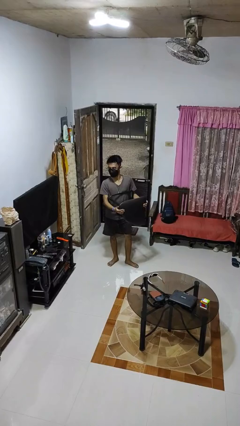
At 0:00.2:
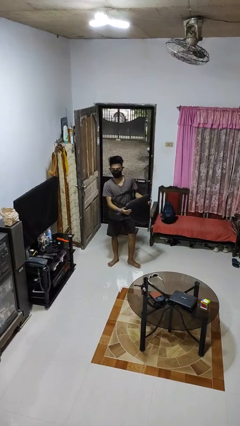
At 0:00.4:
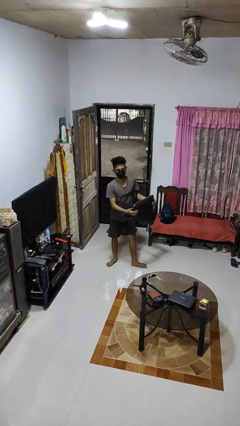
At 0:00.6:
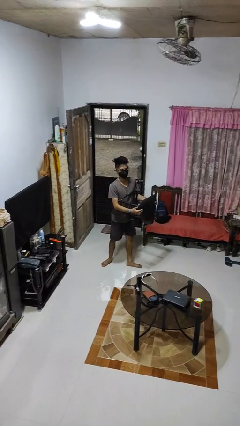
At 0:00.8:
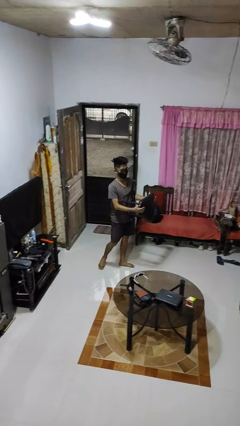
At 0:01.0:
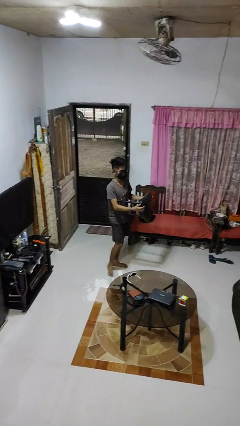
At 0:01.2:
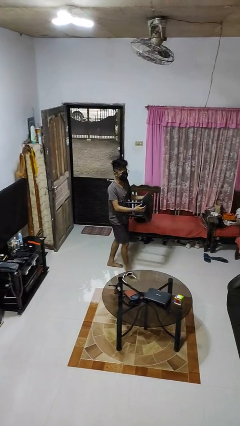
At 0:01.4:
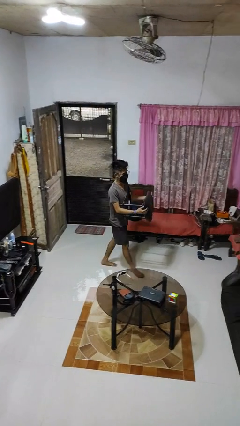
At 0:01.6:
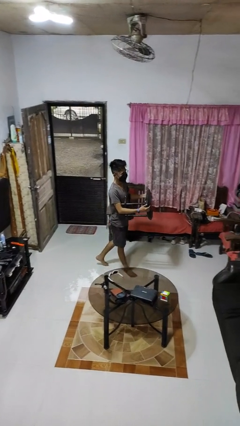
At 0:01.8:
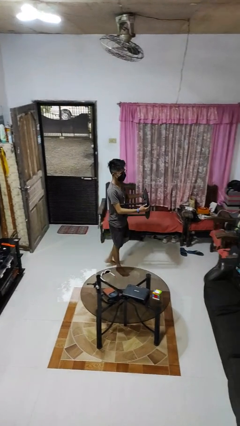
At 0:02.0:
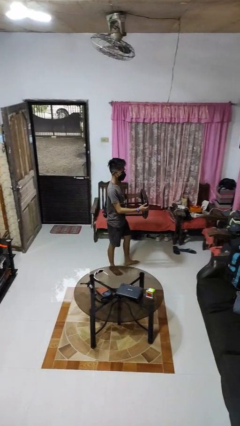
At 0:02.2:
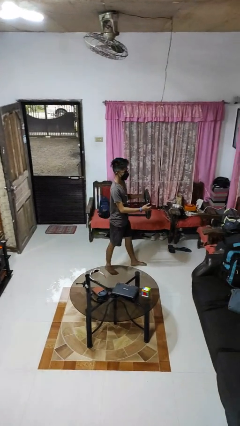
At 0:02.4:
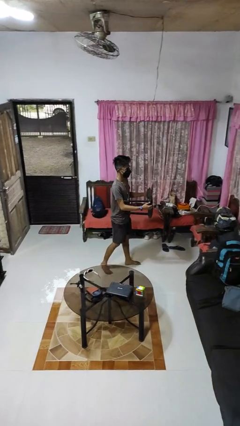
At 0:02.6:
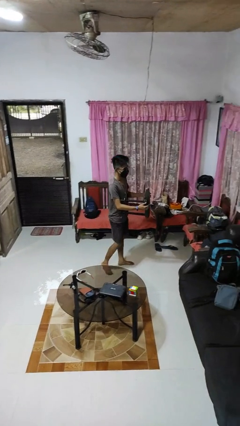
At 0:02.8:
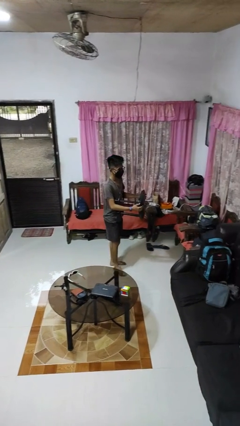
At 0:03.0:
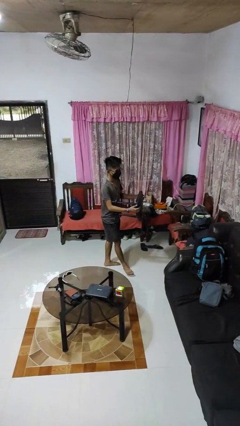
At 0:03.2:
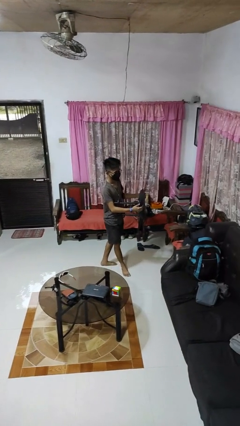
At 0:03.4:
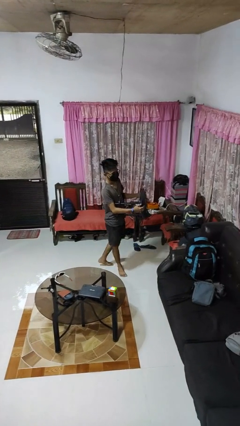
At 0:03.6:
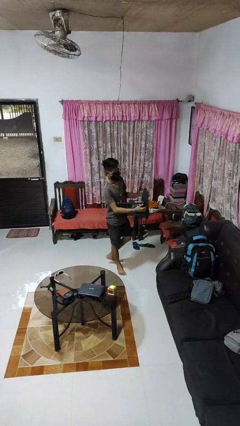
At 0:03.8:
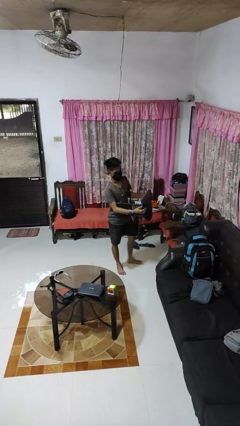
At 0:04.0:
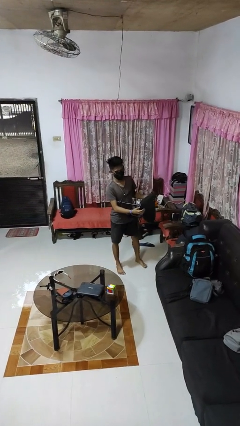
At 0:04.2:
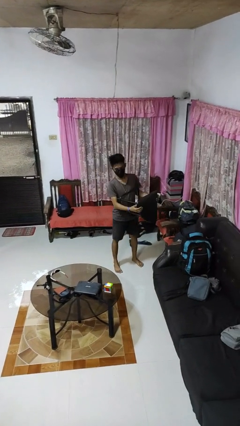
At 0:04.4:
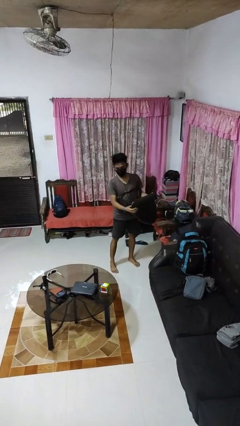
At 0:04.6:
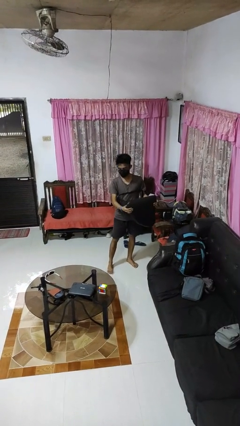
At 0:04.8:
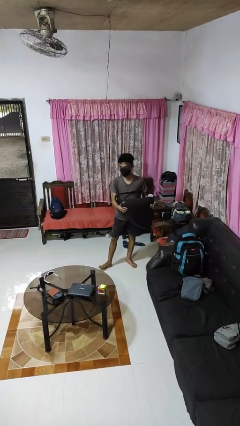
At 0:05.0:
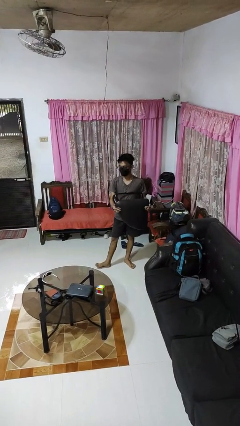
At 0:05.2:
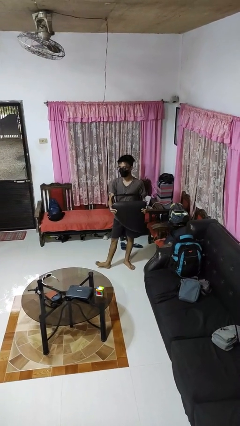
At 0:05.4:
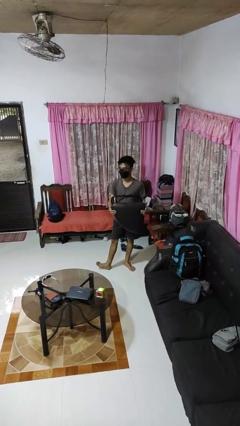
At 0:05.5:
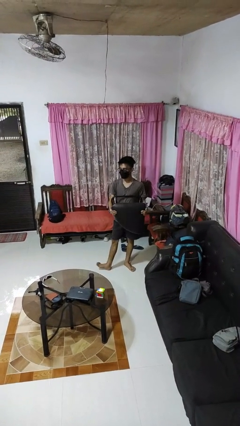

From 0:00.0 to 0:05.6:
person carries furniture

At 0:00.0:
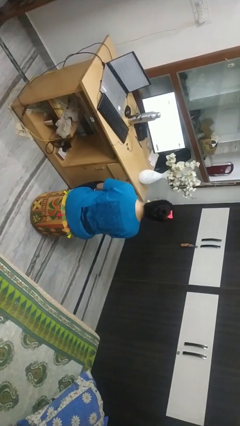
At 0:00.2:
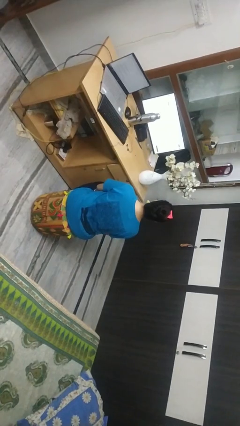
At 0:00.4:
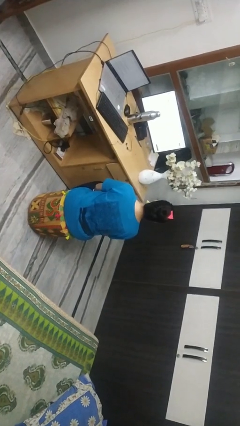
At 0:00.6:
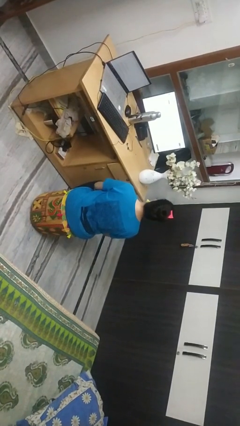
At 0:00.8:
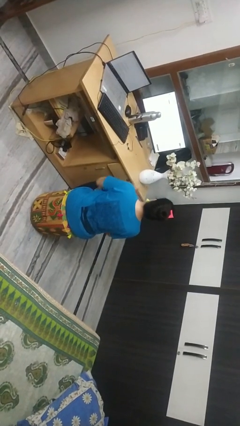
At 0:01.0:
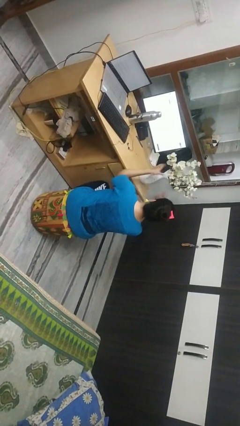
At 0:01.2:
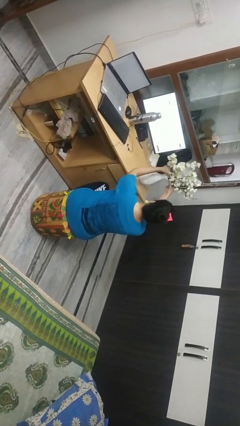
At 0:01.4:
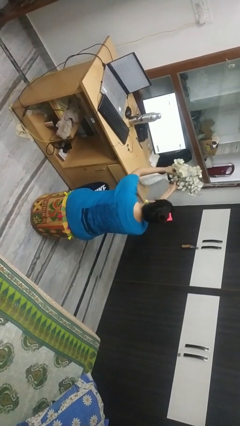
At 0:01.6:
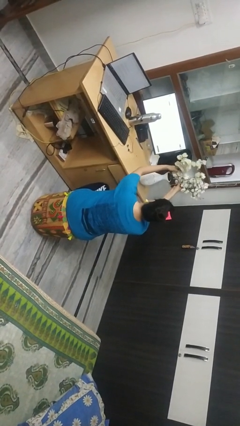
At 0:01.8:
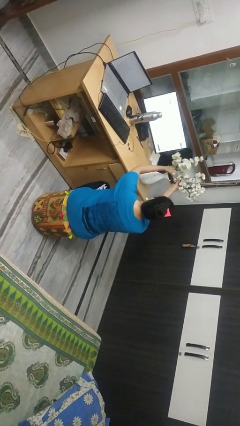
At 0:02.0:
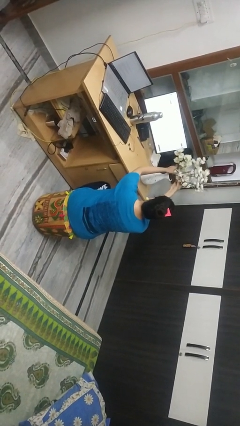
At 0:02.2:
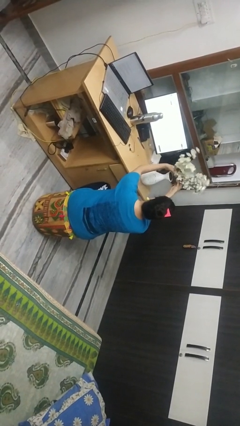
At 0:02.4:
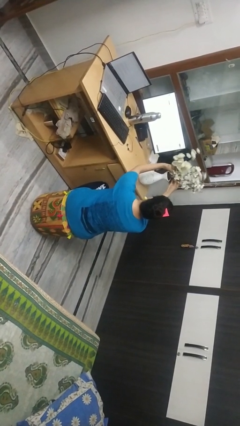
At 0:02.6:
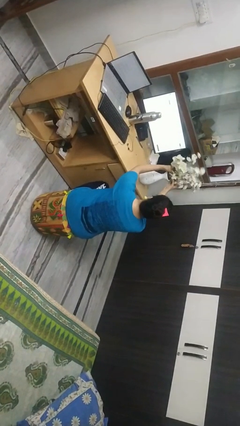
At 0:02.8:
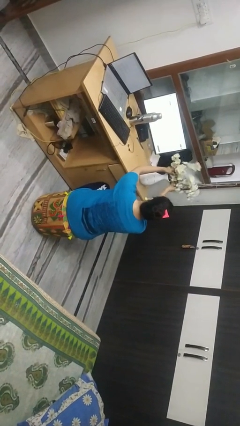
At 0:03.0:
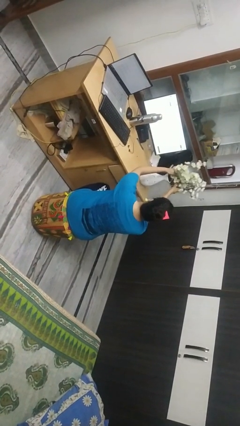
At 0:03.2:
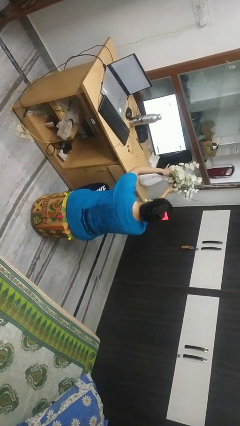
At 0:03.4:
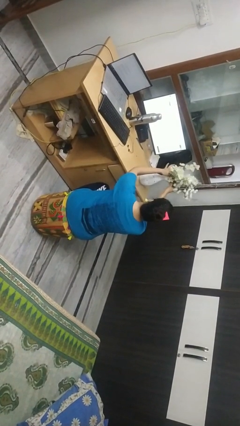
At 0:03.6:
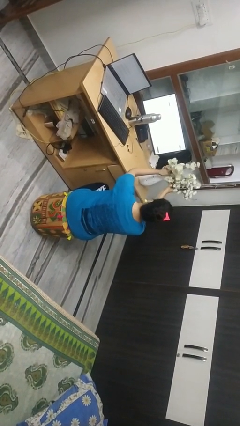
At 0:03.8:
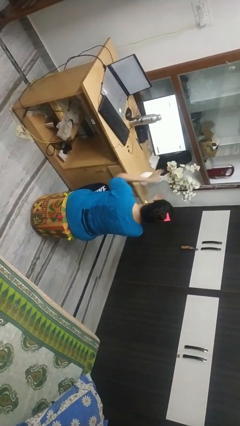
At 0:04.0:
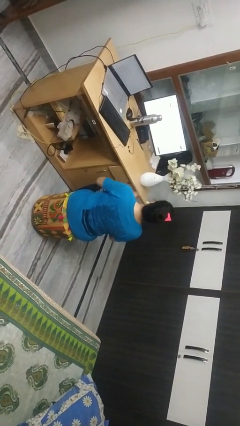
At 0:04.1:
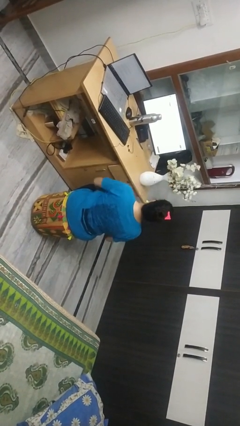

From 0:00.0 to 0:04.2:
person arranges flowers in vase

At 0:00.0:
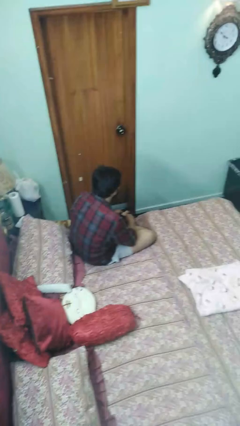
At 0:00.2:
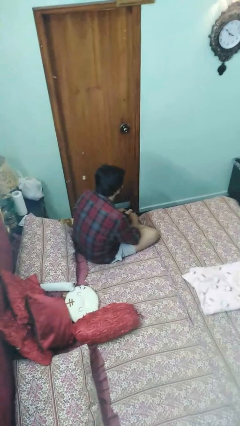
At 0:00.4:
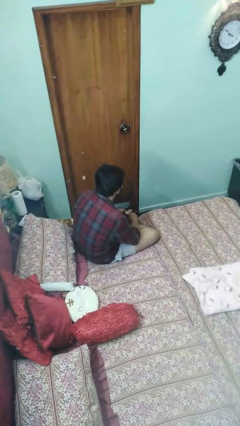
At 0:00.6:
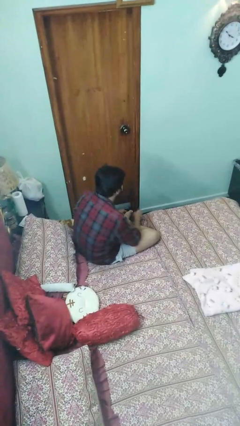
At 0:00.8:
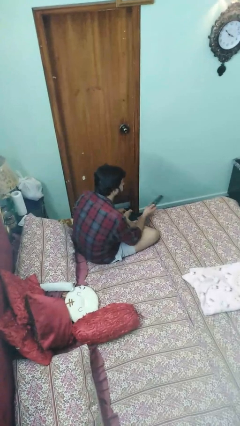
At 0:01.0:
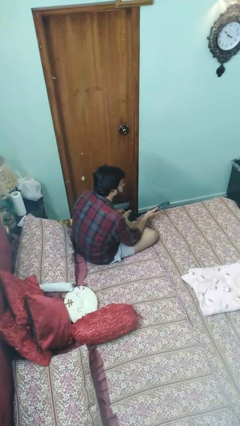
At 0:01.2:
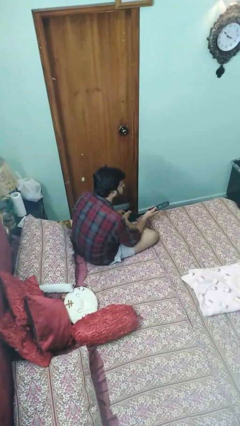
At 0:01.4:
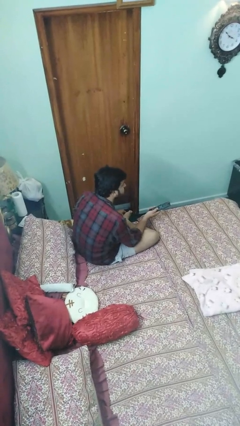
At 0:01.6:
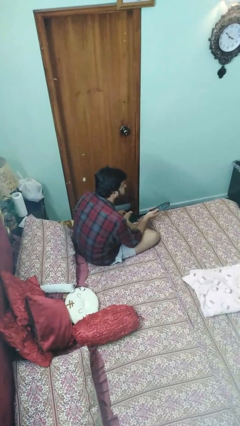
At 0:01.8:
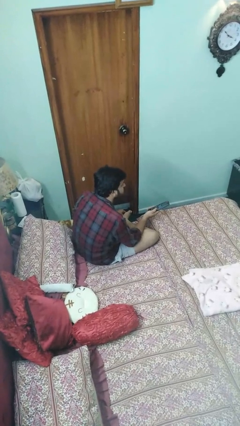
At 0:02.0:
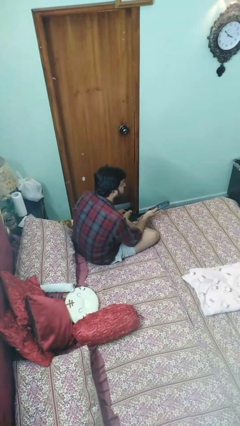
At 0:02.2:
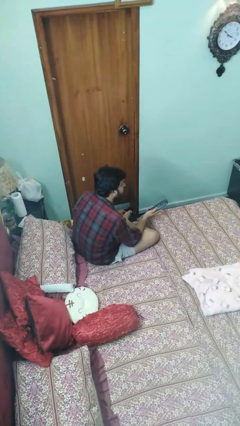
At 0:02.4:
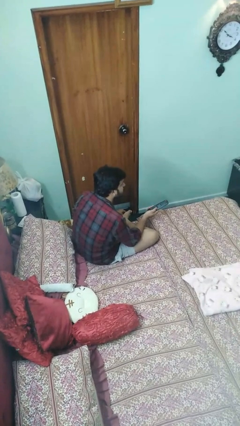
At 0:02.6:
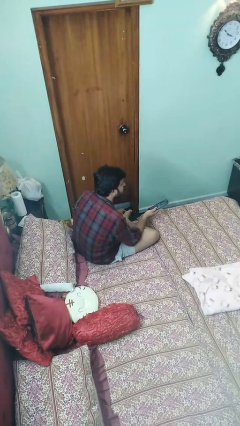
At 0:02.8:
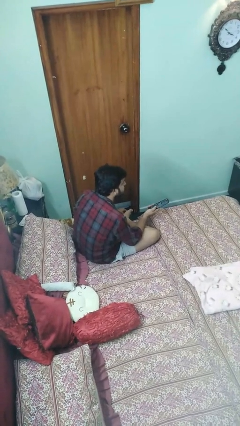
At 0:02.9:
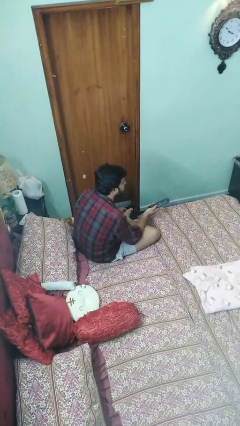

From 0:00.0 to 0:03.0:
person uses television remote

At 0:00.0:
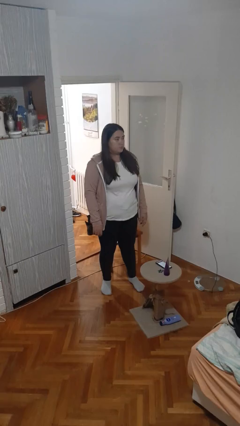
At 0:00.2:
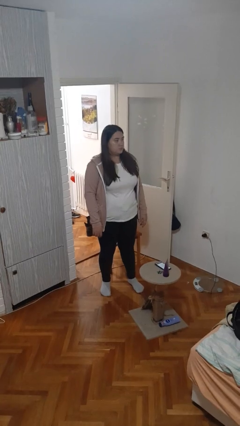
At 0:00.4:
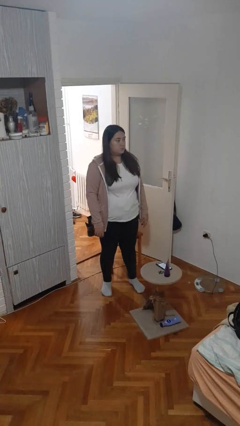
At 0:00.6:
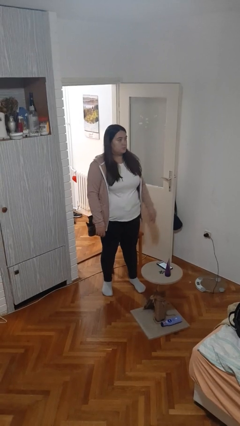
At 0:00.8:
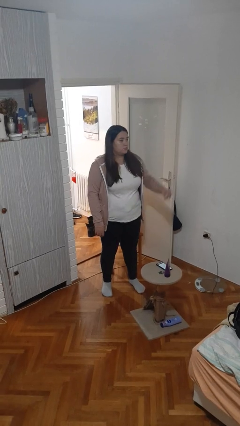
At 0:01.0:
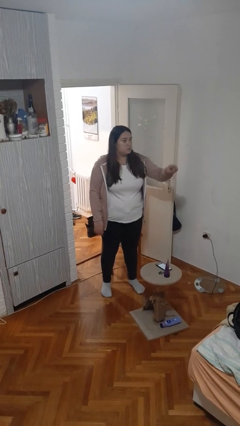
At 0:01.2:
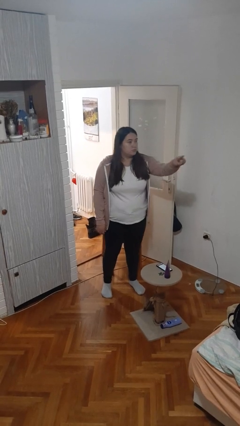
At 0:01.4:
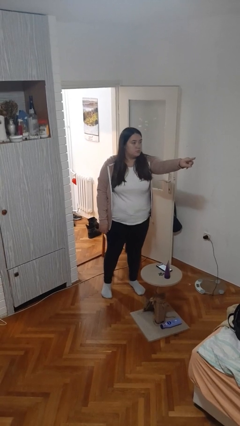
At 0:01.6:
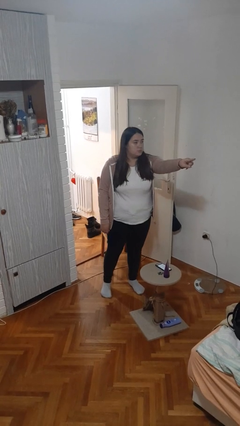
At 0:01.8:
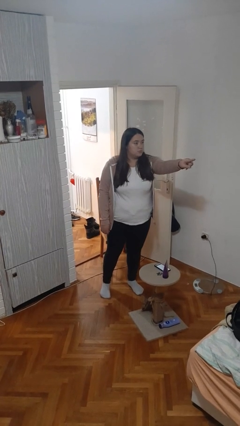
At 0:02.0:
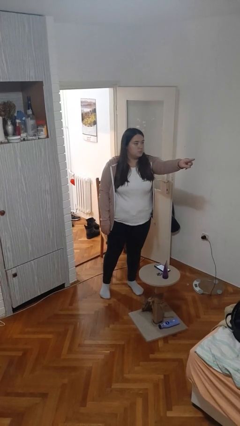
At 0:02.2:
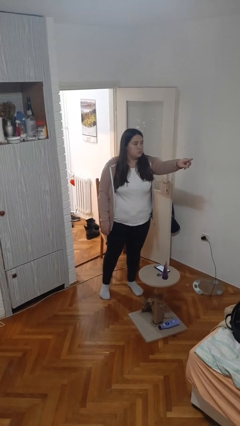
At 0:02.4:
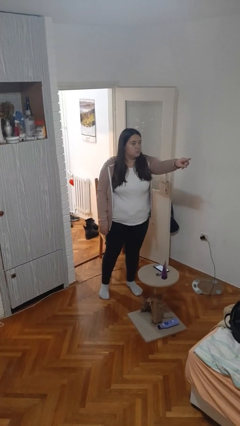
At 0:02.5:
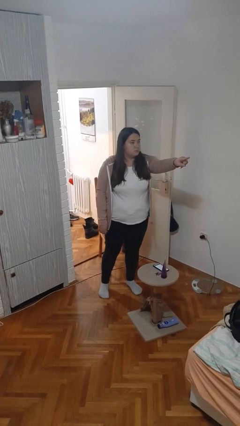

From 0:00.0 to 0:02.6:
person points at person

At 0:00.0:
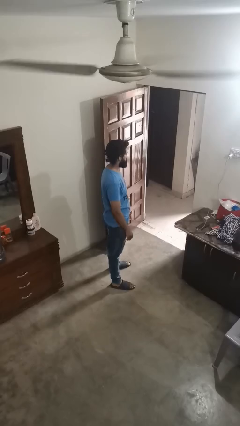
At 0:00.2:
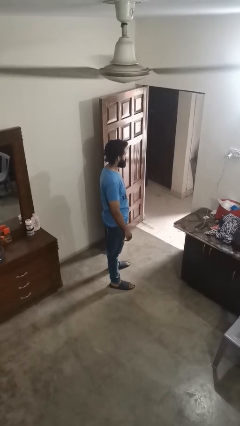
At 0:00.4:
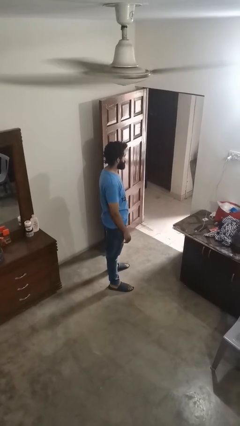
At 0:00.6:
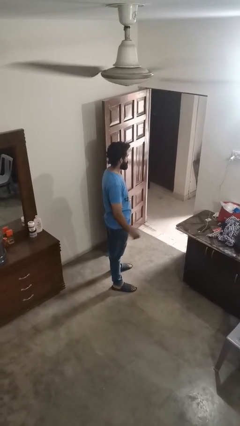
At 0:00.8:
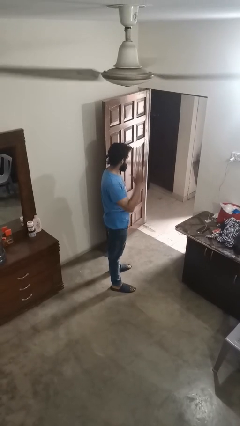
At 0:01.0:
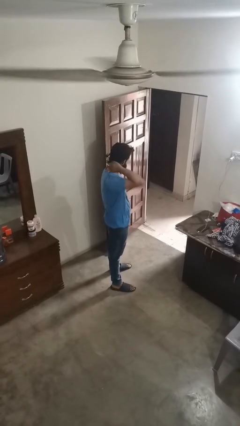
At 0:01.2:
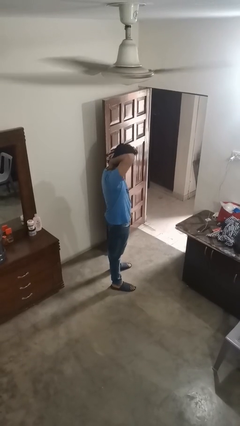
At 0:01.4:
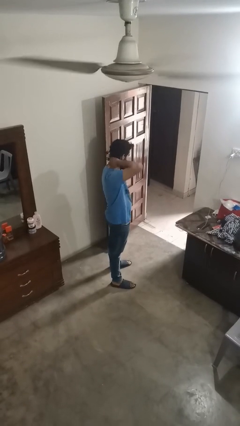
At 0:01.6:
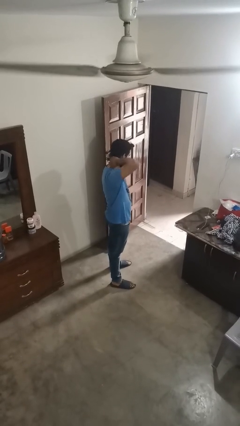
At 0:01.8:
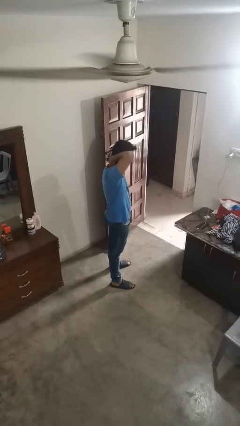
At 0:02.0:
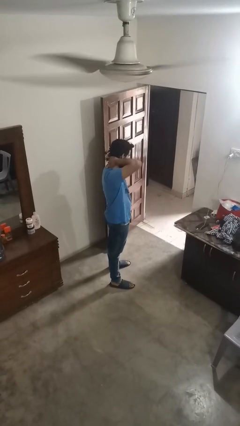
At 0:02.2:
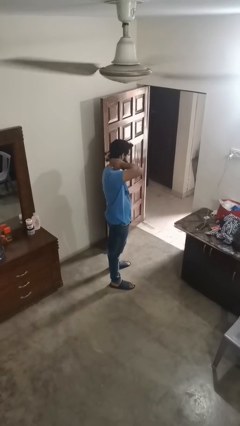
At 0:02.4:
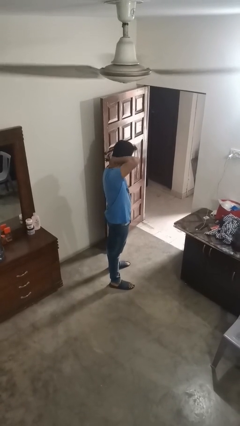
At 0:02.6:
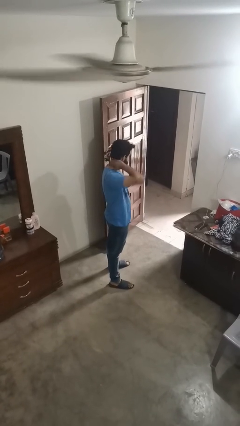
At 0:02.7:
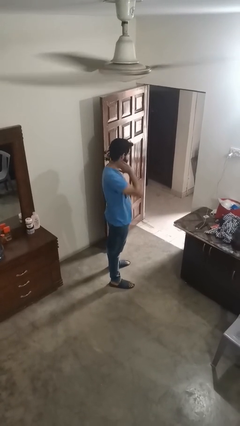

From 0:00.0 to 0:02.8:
person rubs neck
